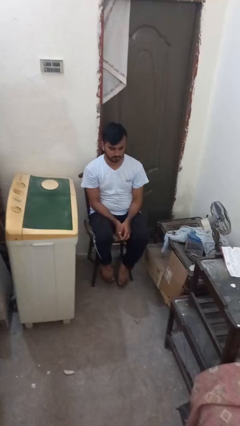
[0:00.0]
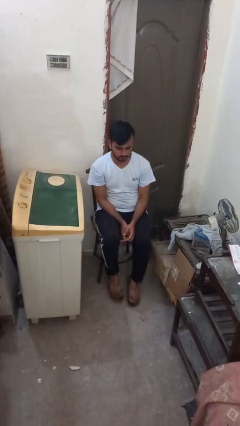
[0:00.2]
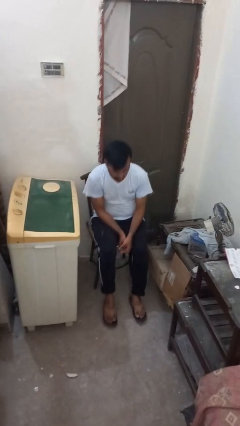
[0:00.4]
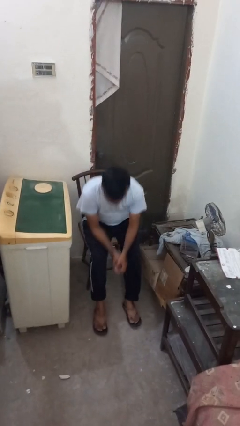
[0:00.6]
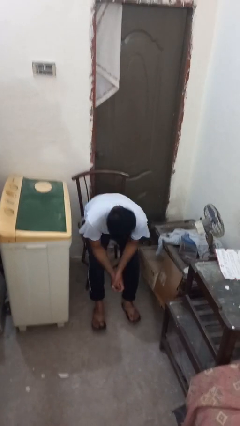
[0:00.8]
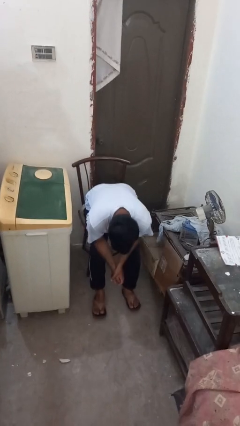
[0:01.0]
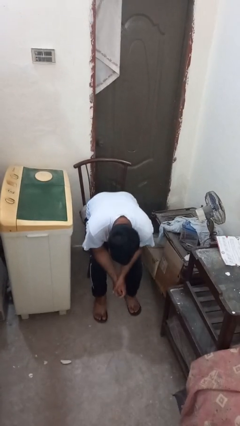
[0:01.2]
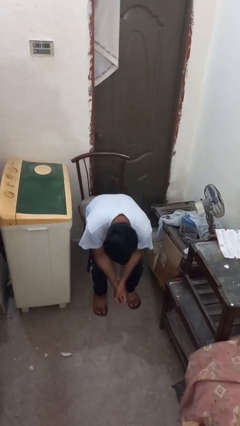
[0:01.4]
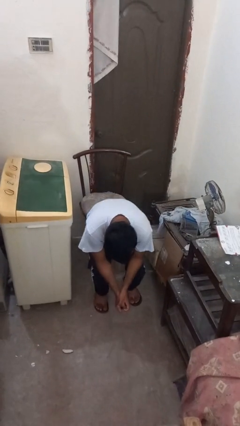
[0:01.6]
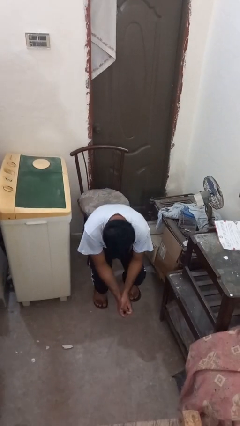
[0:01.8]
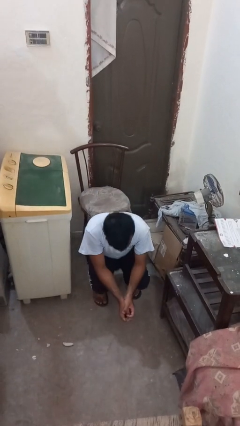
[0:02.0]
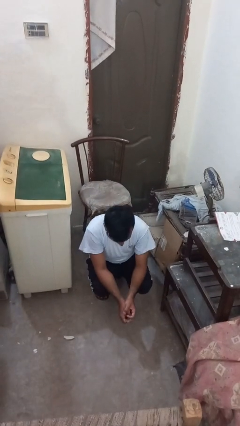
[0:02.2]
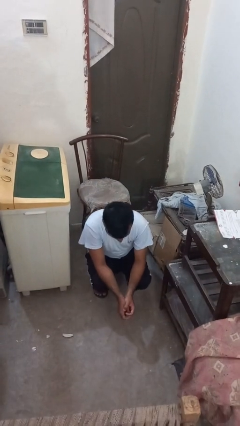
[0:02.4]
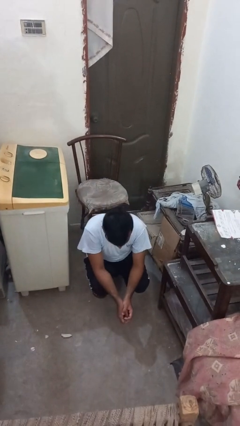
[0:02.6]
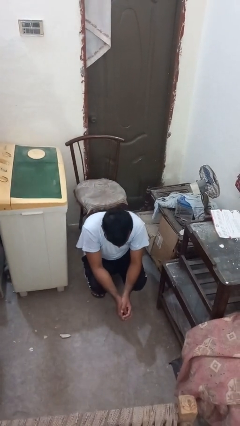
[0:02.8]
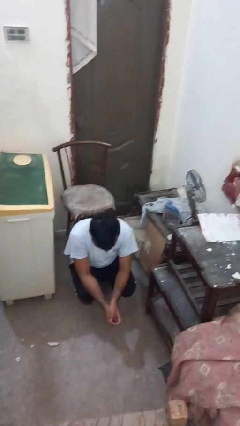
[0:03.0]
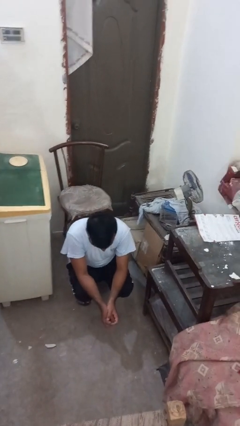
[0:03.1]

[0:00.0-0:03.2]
person falls from chair

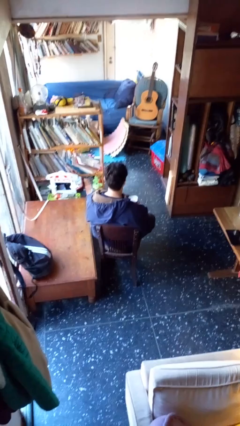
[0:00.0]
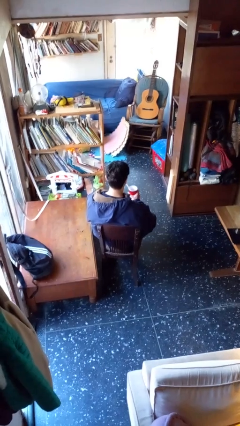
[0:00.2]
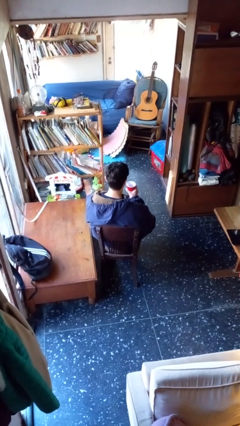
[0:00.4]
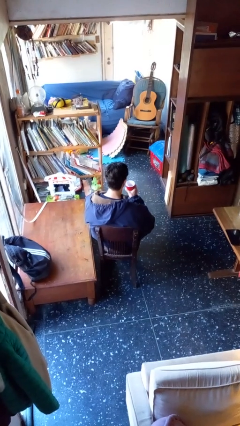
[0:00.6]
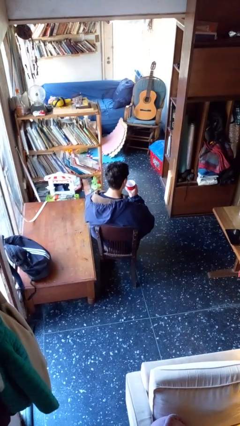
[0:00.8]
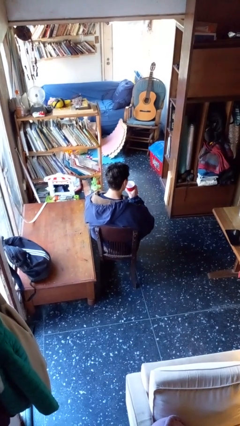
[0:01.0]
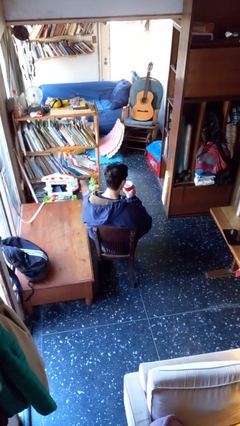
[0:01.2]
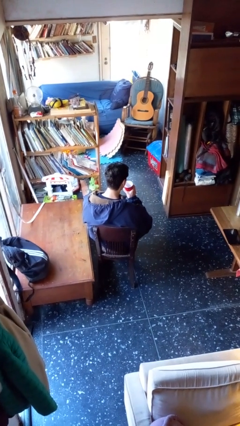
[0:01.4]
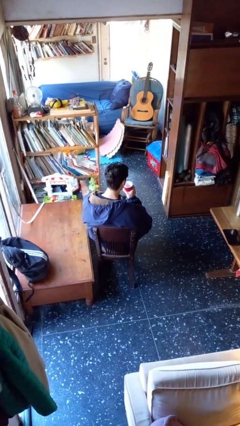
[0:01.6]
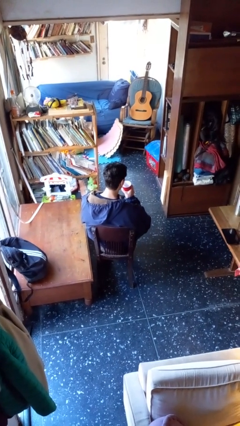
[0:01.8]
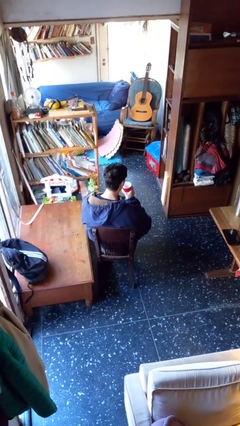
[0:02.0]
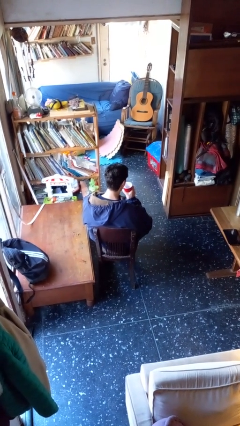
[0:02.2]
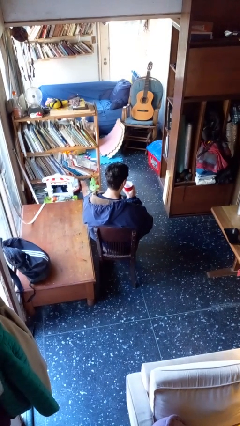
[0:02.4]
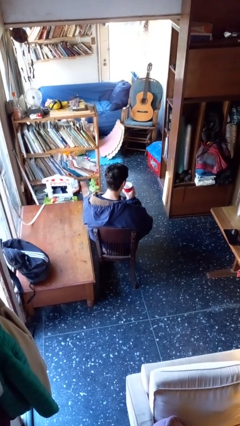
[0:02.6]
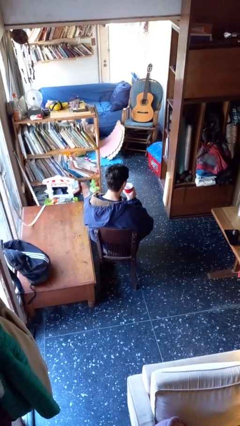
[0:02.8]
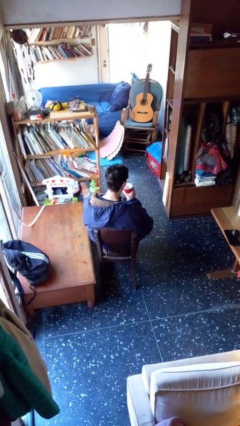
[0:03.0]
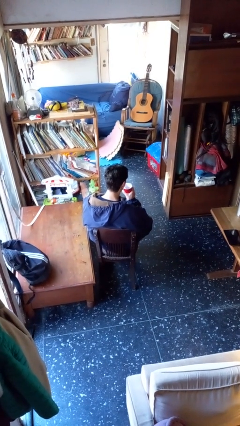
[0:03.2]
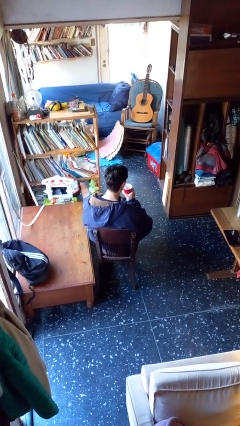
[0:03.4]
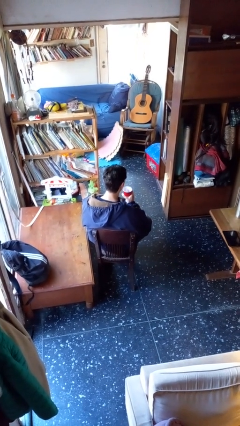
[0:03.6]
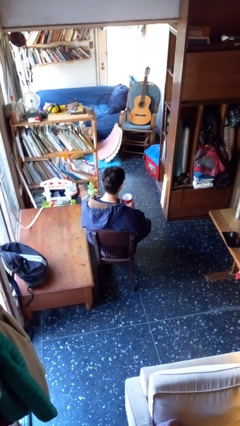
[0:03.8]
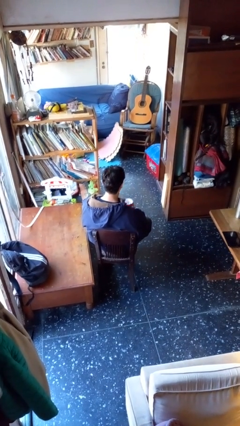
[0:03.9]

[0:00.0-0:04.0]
person drinks from straw

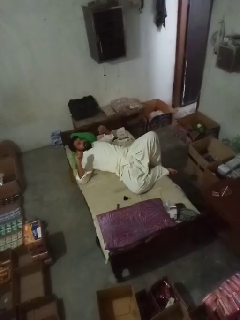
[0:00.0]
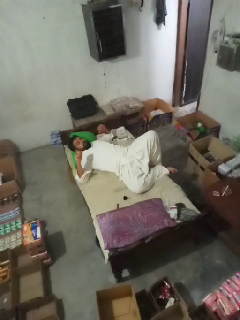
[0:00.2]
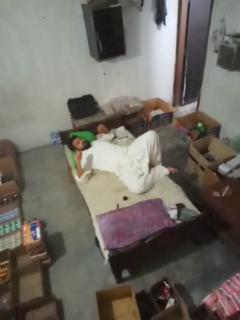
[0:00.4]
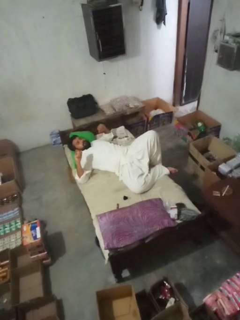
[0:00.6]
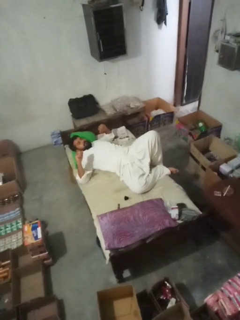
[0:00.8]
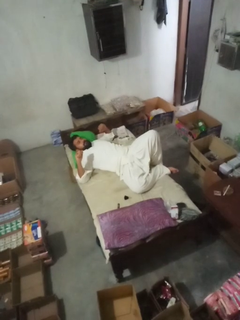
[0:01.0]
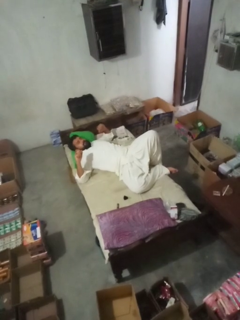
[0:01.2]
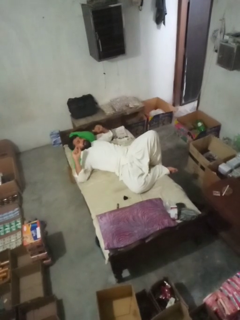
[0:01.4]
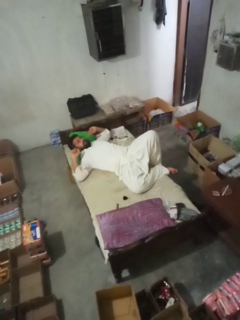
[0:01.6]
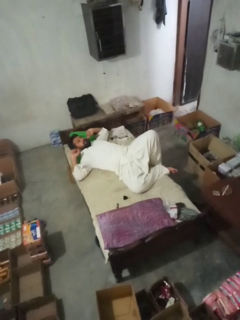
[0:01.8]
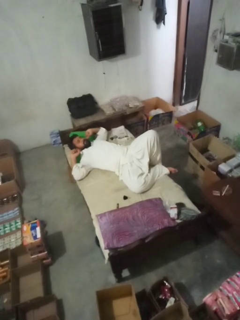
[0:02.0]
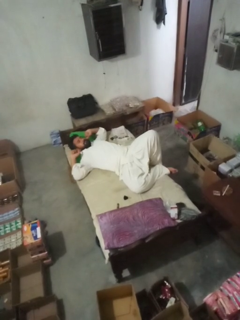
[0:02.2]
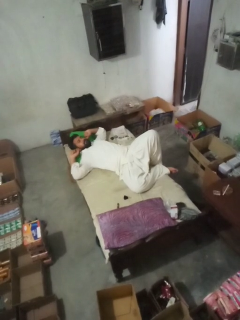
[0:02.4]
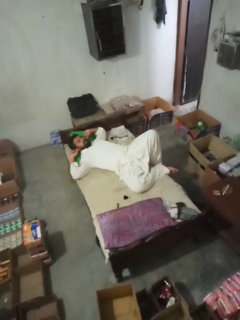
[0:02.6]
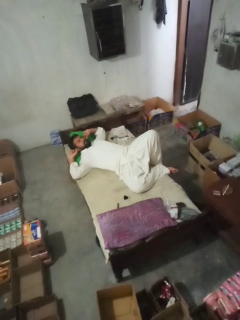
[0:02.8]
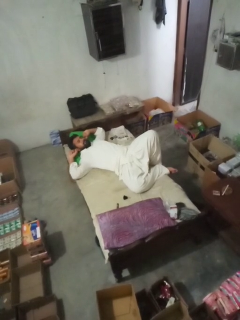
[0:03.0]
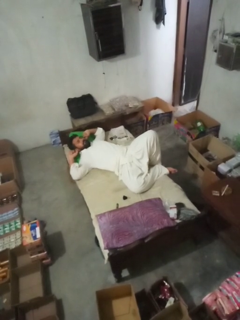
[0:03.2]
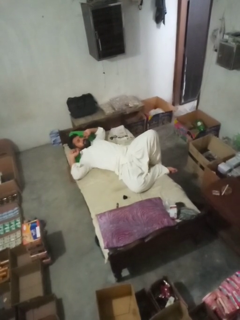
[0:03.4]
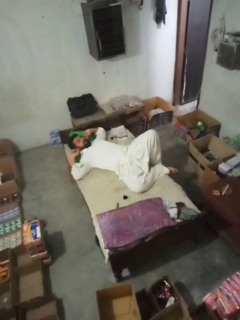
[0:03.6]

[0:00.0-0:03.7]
person puts fingers in ear

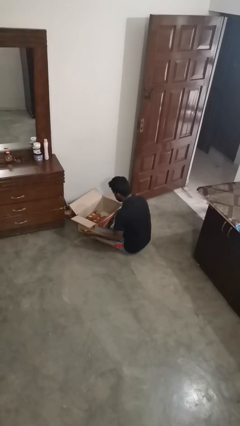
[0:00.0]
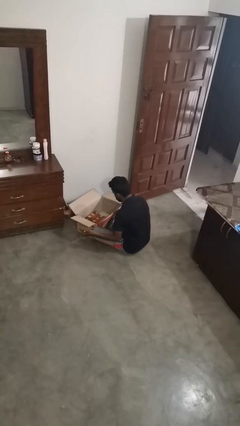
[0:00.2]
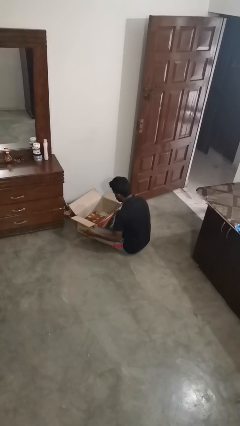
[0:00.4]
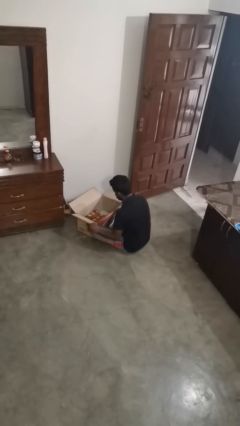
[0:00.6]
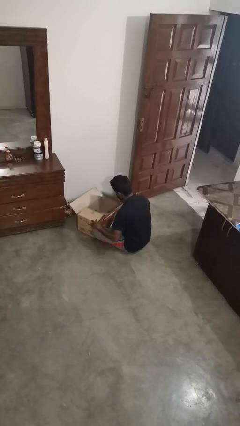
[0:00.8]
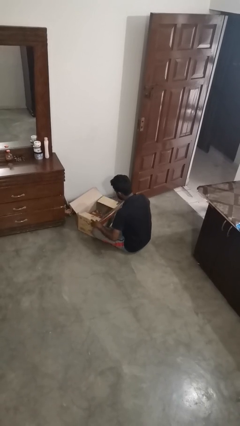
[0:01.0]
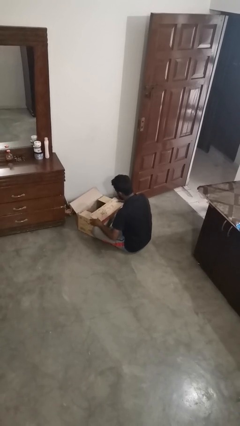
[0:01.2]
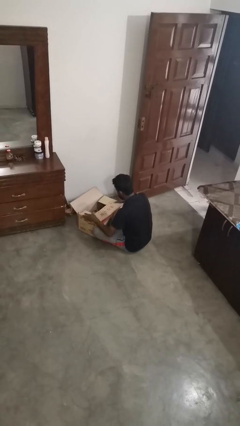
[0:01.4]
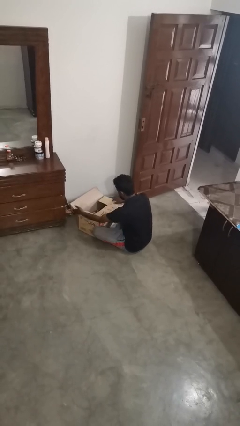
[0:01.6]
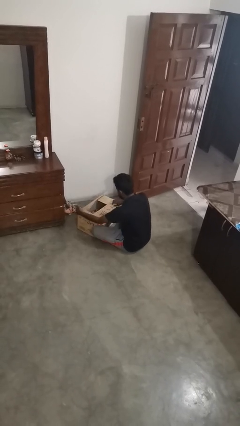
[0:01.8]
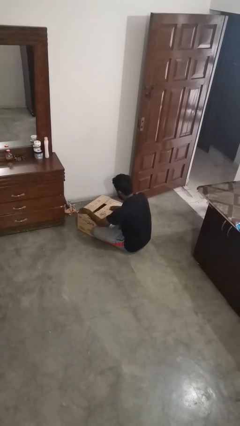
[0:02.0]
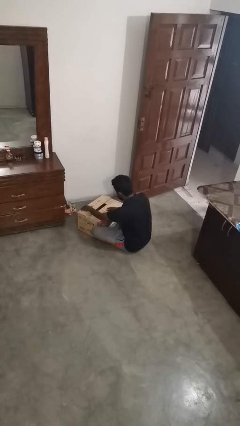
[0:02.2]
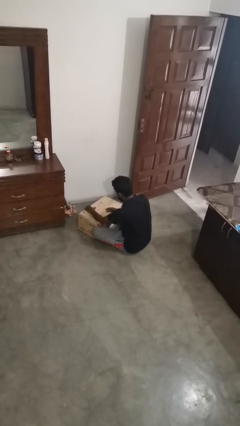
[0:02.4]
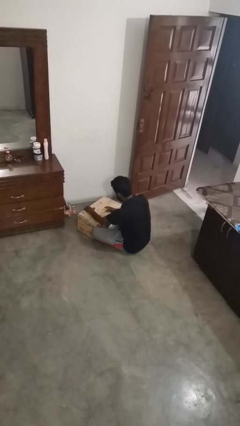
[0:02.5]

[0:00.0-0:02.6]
person closes box

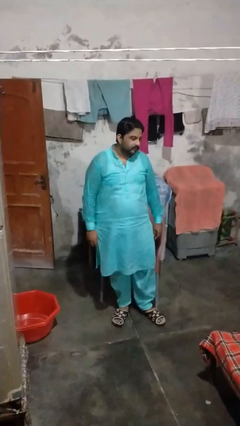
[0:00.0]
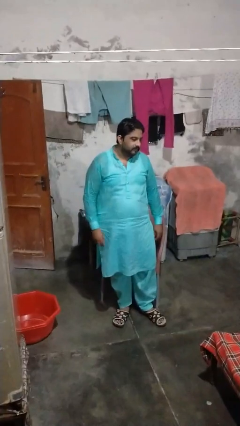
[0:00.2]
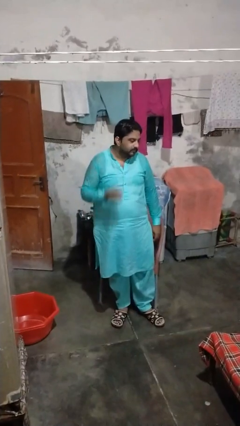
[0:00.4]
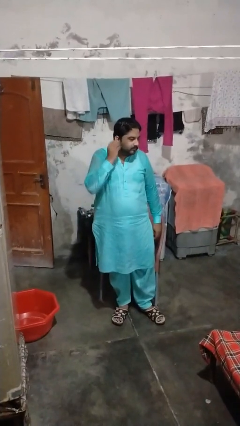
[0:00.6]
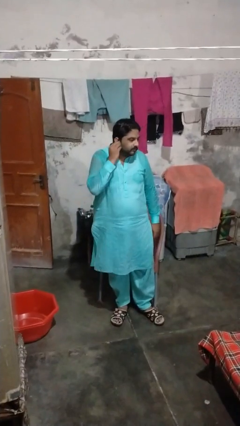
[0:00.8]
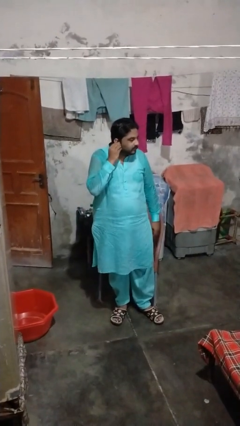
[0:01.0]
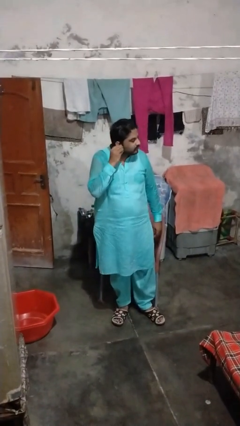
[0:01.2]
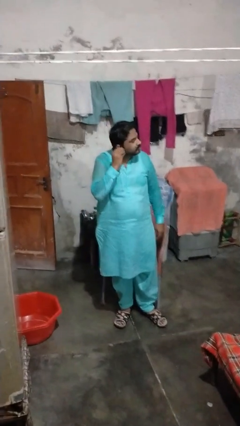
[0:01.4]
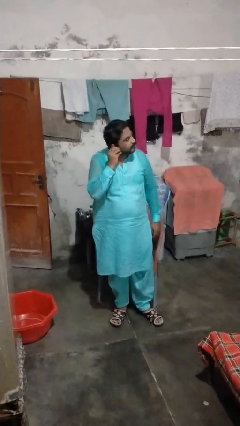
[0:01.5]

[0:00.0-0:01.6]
person takes off earrings

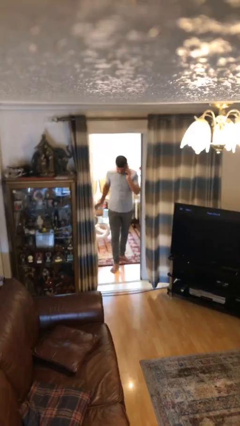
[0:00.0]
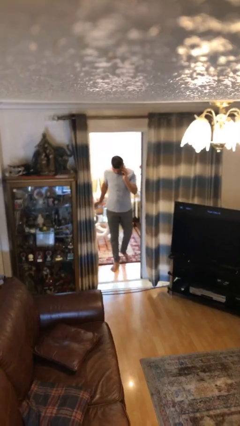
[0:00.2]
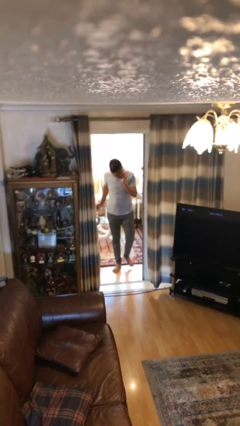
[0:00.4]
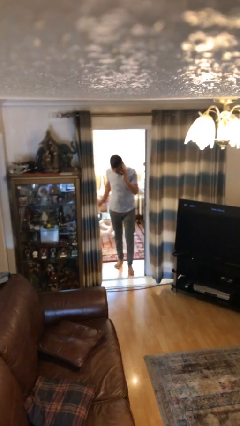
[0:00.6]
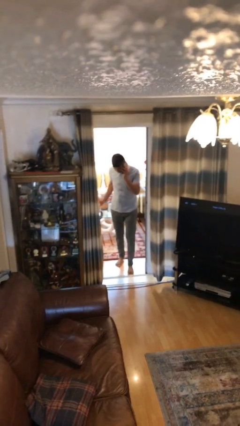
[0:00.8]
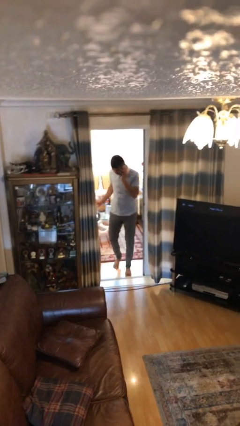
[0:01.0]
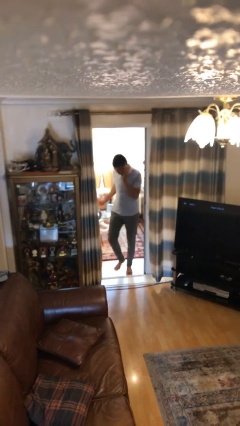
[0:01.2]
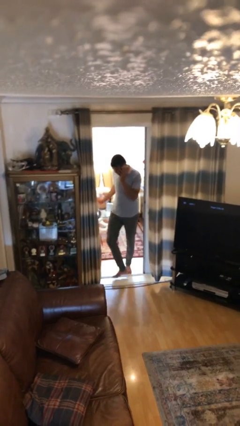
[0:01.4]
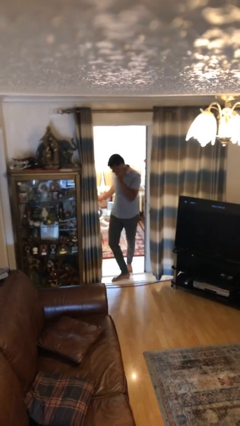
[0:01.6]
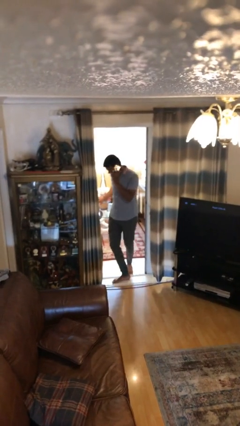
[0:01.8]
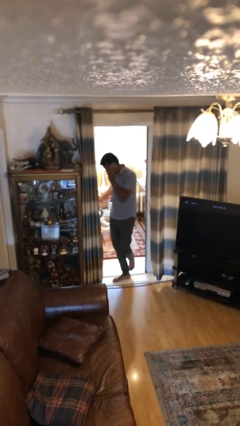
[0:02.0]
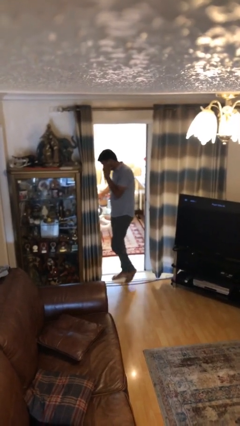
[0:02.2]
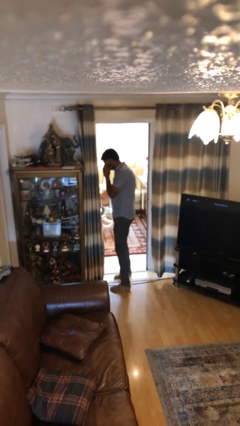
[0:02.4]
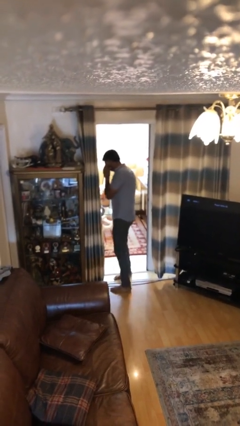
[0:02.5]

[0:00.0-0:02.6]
person enters scene through structure

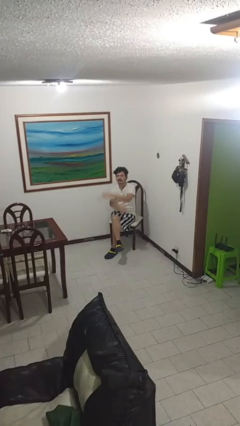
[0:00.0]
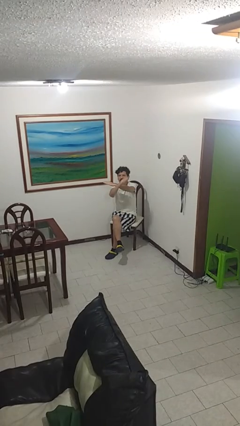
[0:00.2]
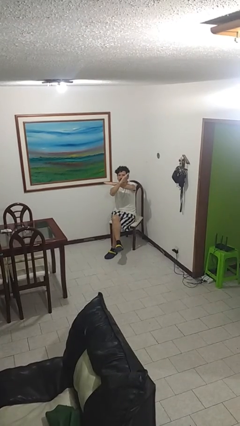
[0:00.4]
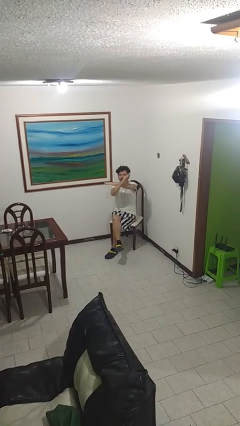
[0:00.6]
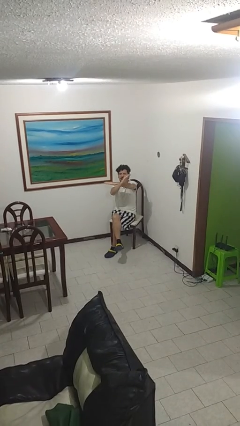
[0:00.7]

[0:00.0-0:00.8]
person gestures arms x
